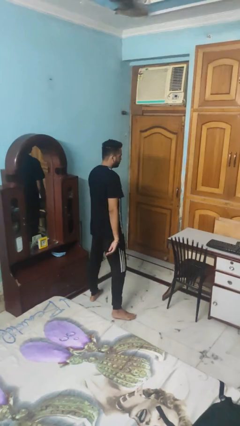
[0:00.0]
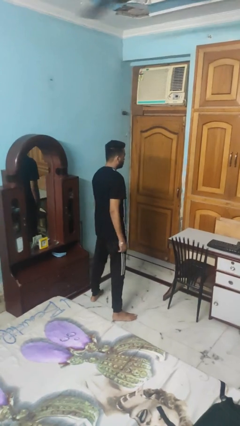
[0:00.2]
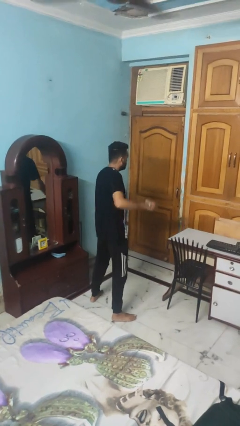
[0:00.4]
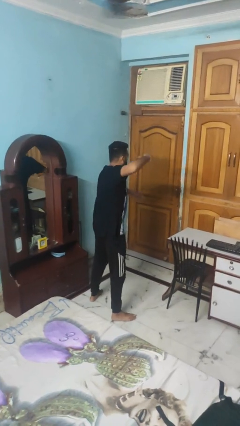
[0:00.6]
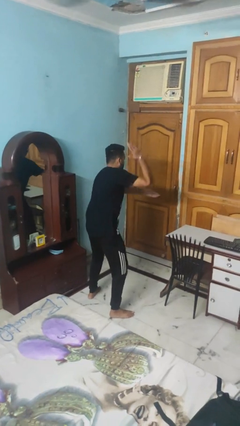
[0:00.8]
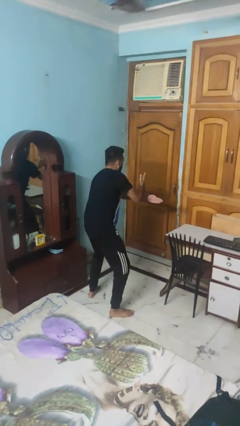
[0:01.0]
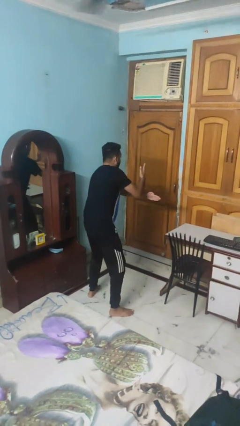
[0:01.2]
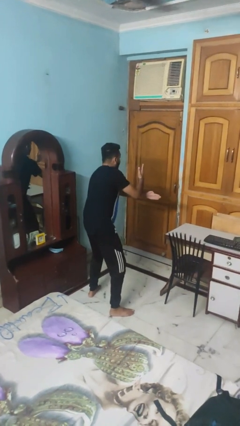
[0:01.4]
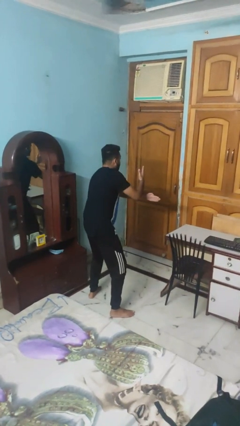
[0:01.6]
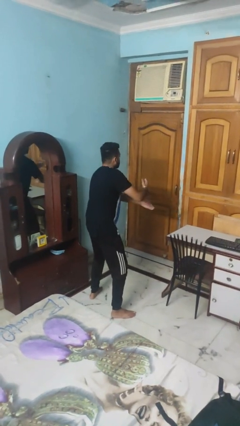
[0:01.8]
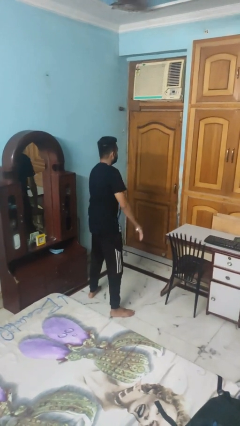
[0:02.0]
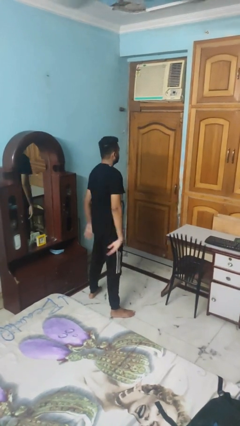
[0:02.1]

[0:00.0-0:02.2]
person karate chop

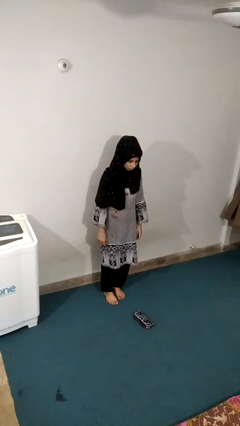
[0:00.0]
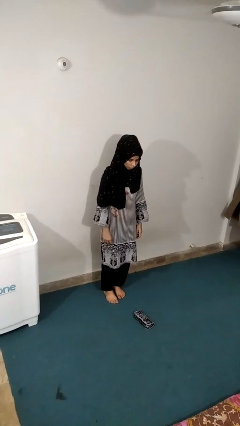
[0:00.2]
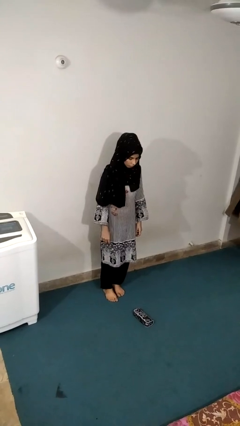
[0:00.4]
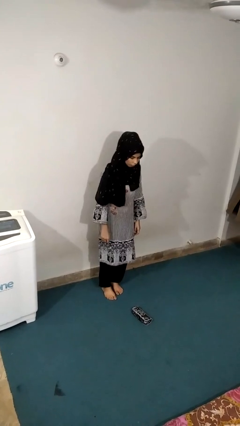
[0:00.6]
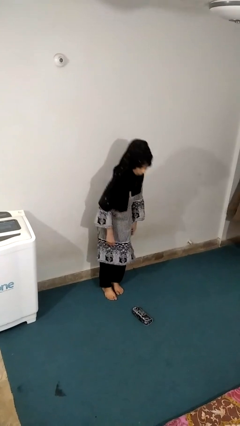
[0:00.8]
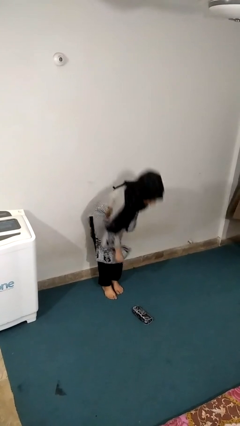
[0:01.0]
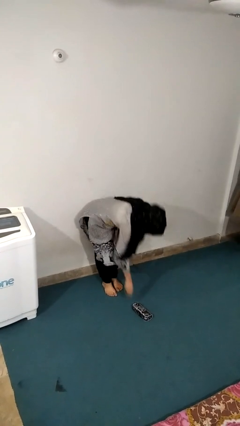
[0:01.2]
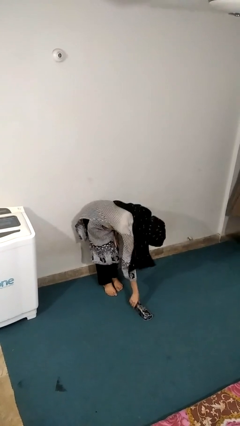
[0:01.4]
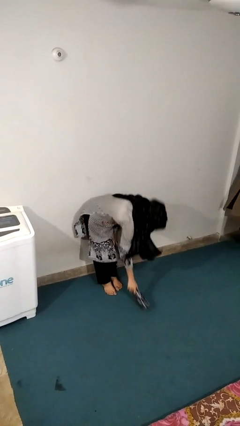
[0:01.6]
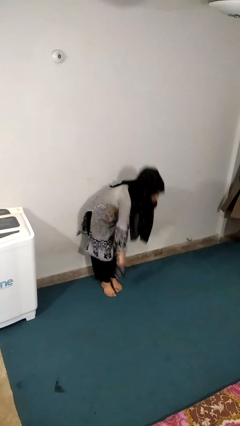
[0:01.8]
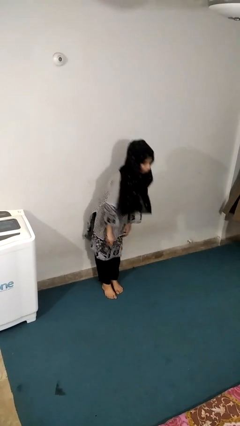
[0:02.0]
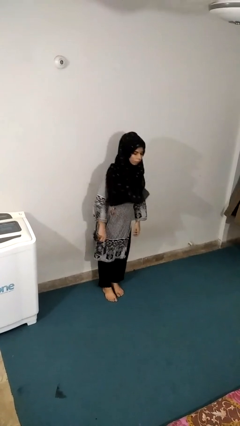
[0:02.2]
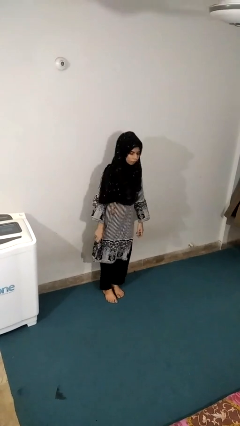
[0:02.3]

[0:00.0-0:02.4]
person picks up object from floor

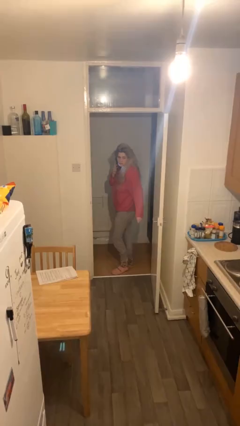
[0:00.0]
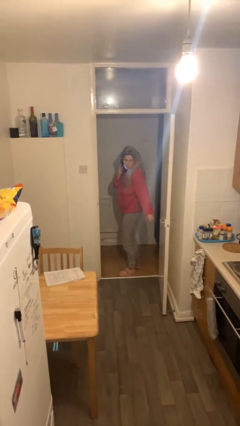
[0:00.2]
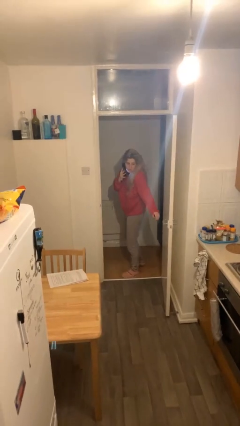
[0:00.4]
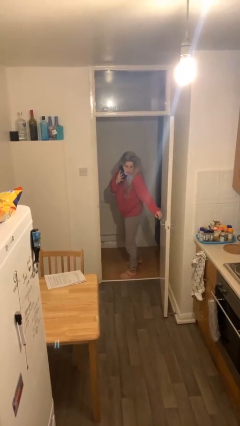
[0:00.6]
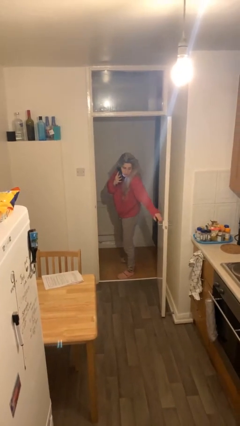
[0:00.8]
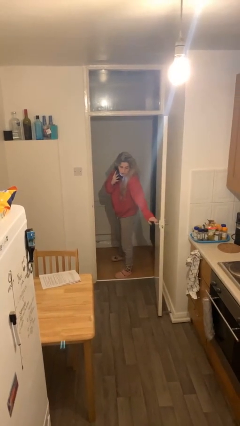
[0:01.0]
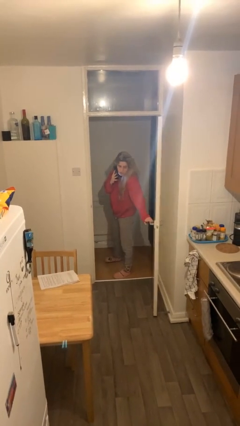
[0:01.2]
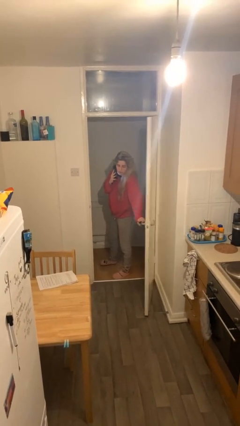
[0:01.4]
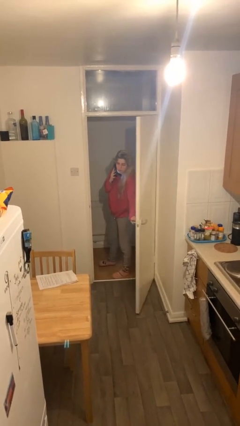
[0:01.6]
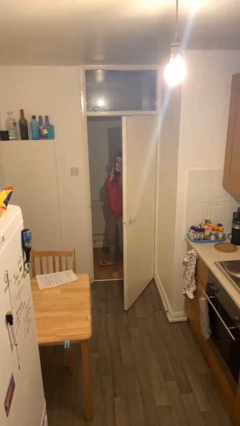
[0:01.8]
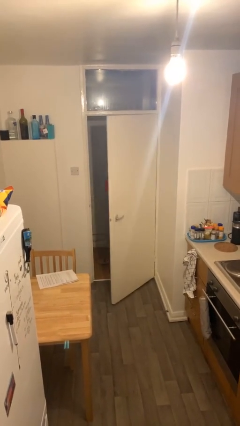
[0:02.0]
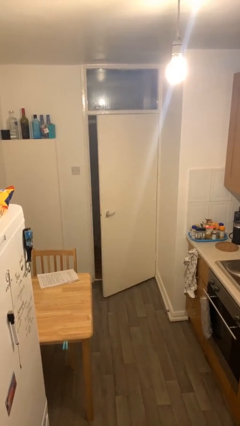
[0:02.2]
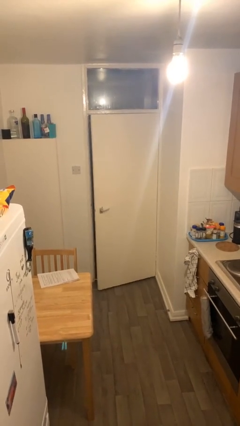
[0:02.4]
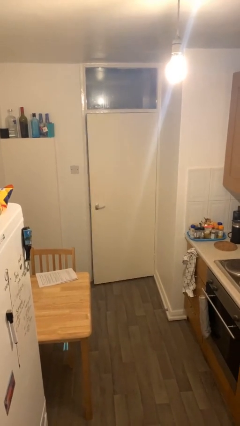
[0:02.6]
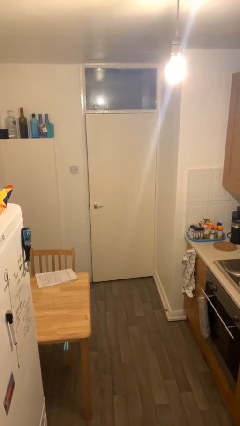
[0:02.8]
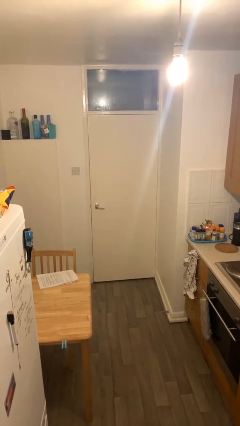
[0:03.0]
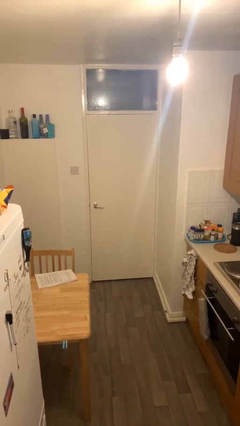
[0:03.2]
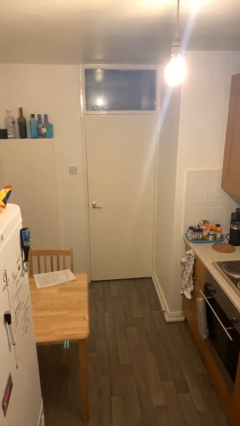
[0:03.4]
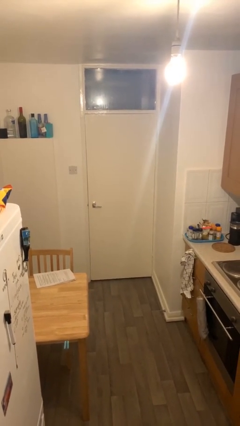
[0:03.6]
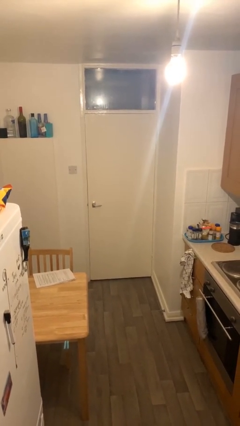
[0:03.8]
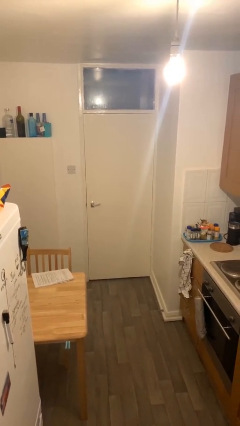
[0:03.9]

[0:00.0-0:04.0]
person closes facility door

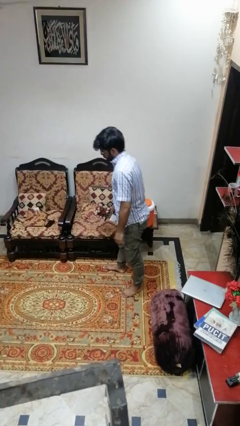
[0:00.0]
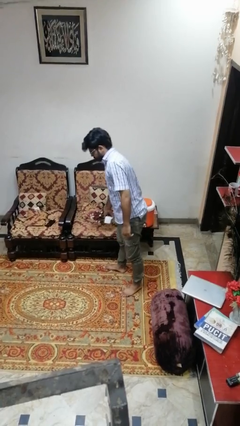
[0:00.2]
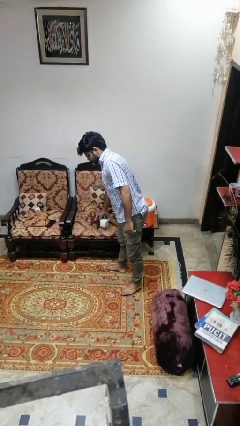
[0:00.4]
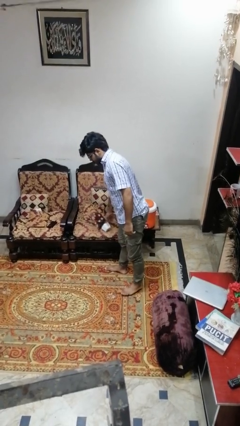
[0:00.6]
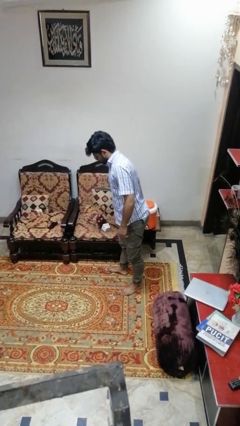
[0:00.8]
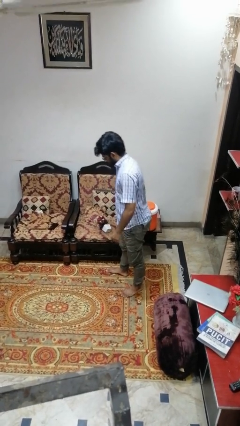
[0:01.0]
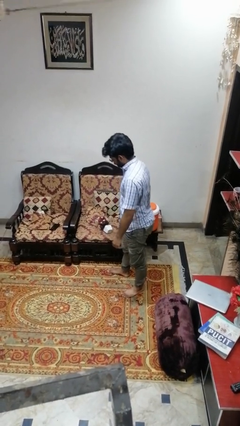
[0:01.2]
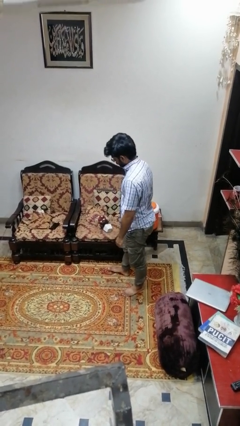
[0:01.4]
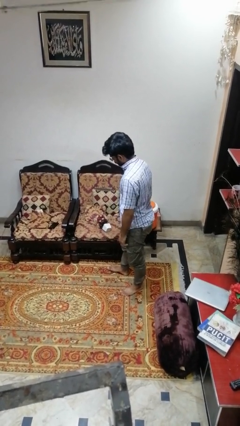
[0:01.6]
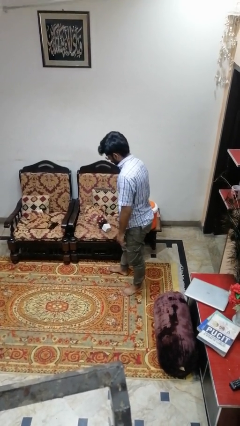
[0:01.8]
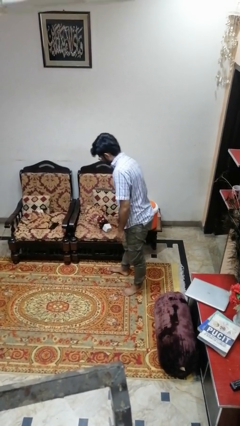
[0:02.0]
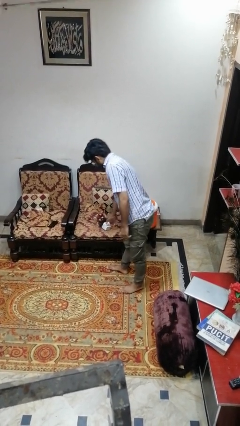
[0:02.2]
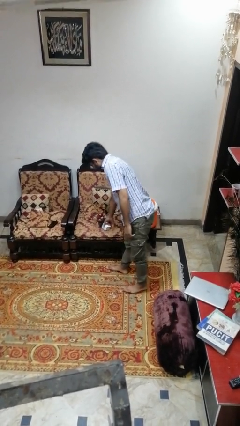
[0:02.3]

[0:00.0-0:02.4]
person puts down object on couch

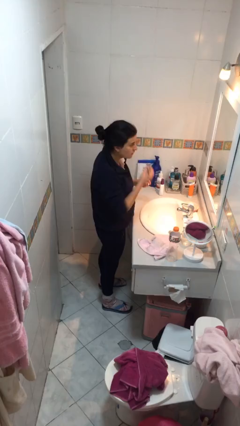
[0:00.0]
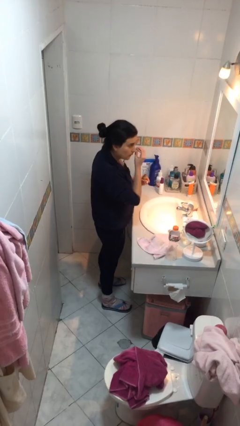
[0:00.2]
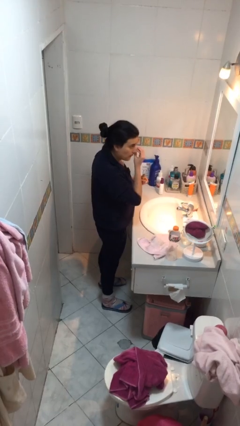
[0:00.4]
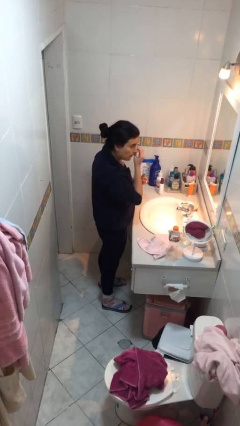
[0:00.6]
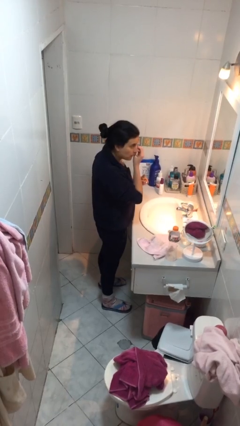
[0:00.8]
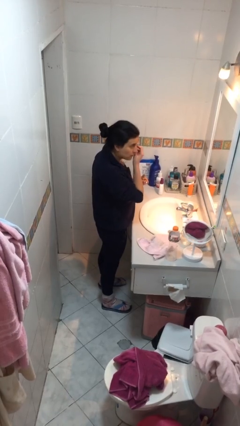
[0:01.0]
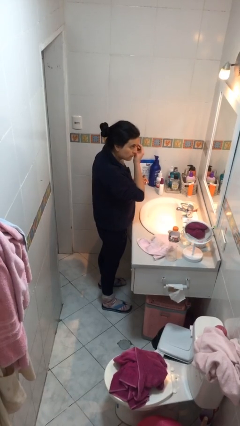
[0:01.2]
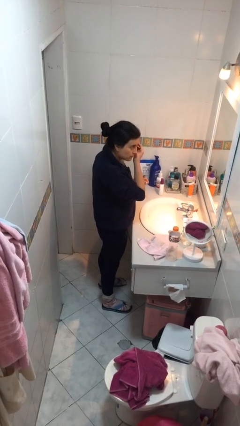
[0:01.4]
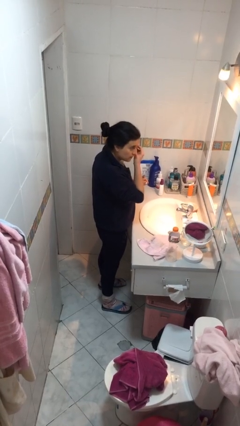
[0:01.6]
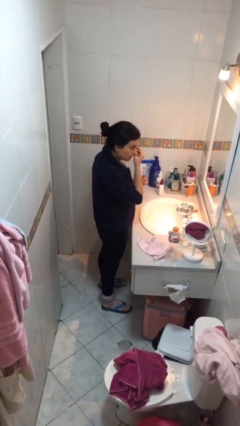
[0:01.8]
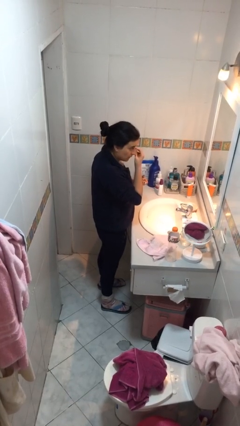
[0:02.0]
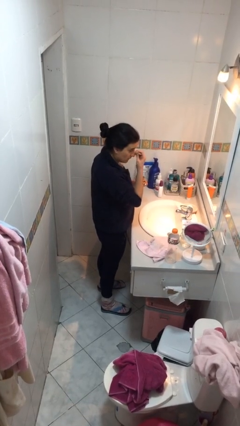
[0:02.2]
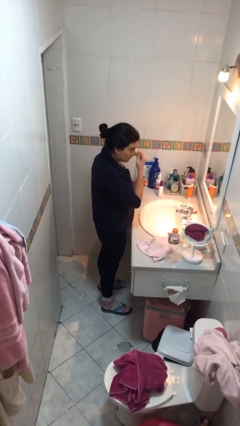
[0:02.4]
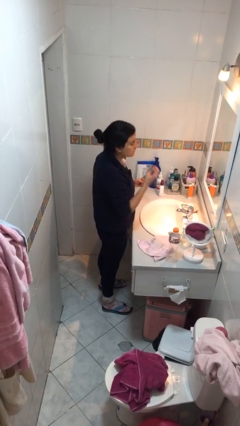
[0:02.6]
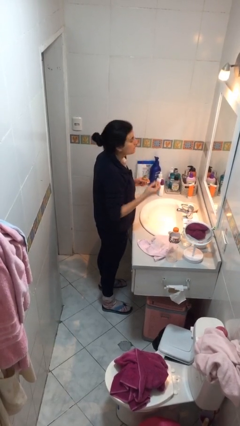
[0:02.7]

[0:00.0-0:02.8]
person applies foundation makeup

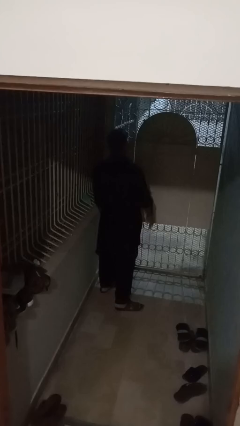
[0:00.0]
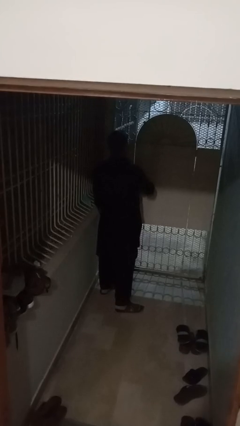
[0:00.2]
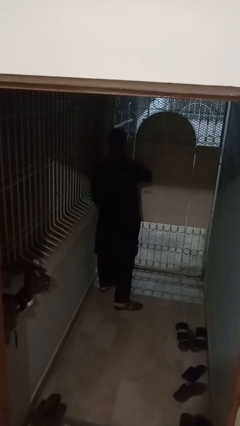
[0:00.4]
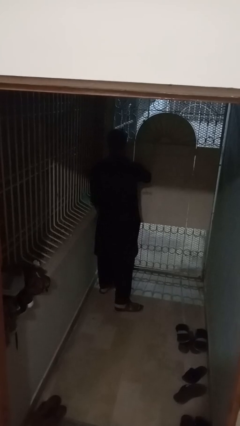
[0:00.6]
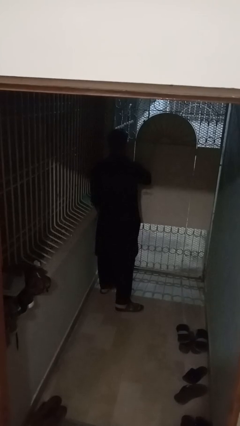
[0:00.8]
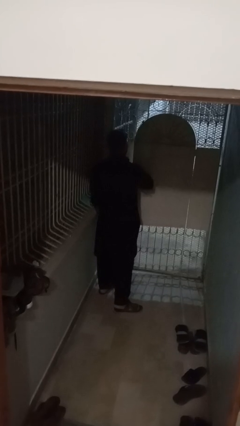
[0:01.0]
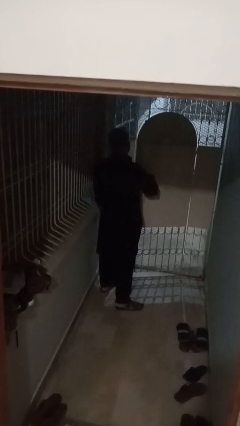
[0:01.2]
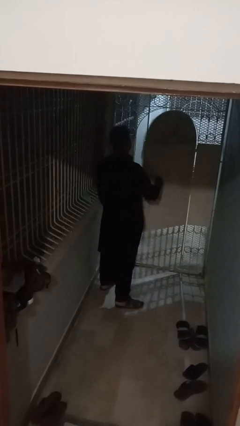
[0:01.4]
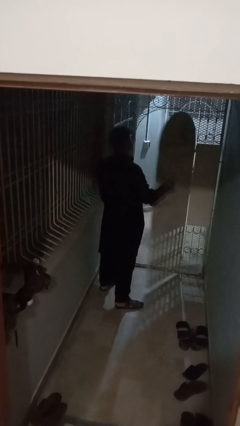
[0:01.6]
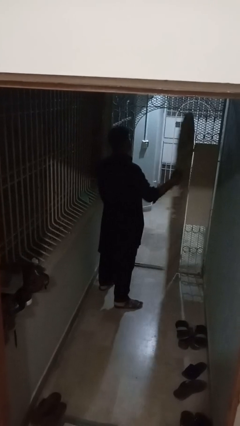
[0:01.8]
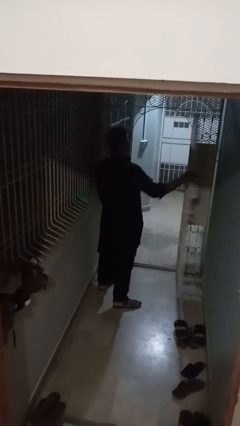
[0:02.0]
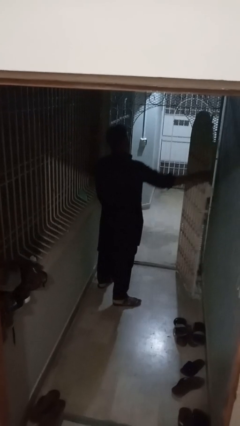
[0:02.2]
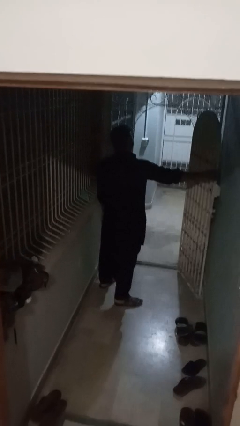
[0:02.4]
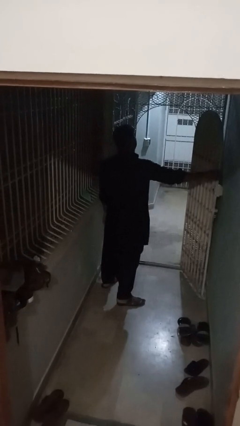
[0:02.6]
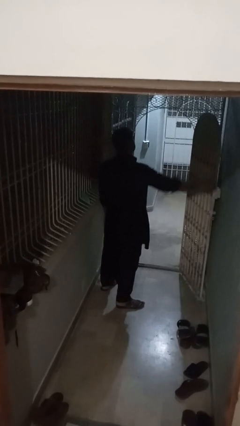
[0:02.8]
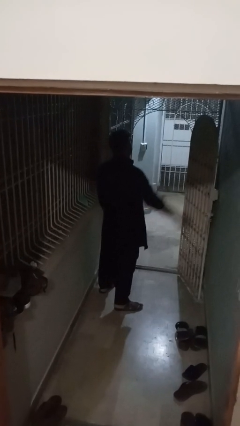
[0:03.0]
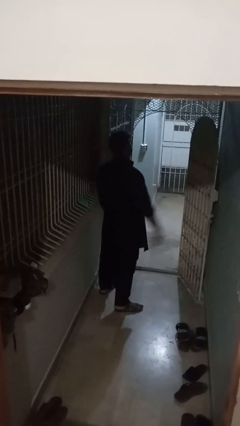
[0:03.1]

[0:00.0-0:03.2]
person opens gate

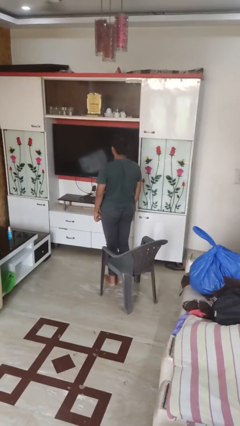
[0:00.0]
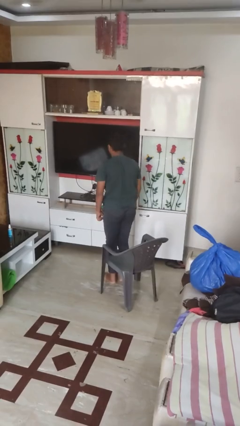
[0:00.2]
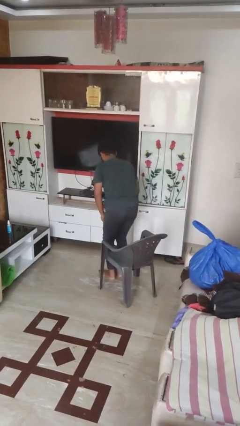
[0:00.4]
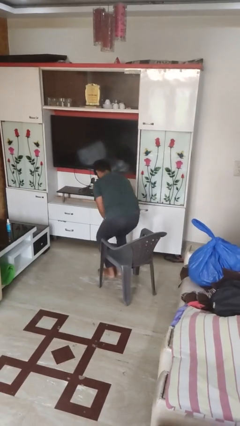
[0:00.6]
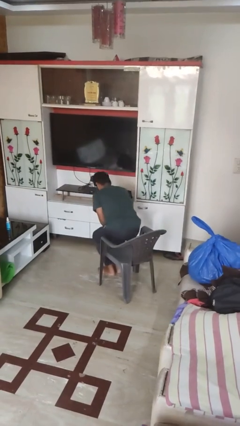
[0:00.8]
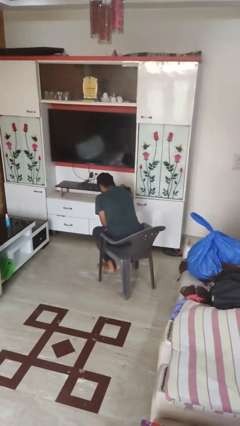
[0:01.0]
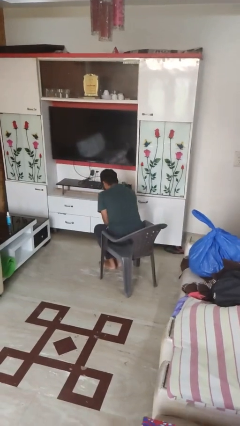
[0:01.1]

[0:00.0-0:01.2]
person sits down
